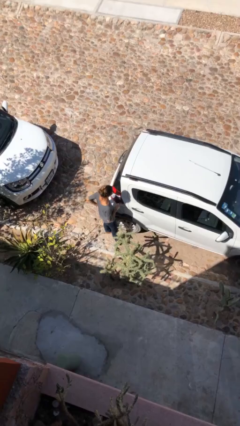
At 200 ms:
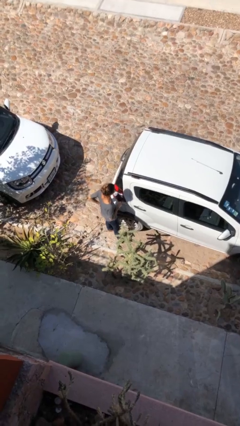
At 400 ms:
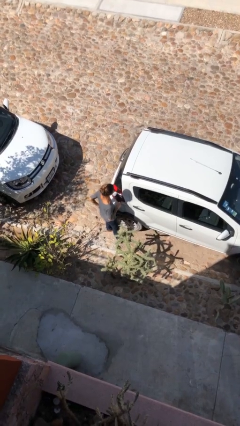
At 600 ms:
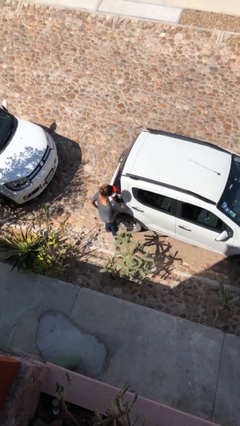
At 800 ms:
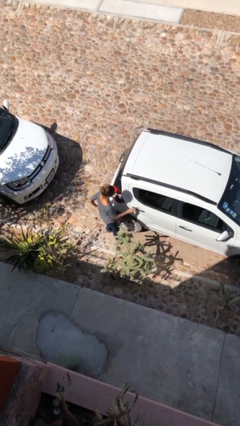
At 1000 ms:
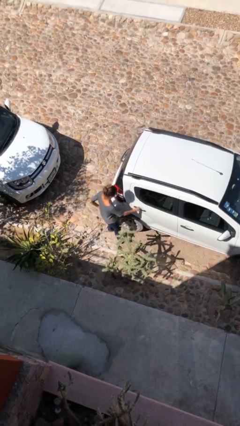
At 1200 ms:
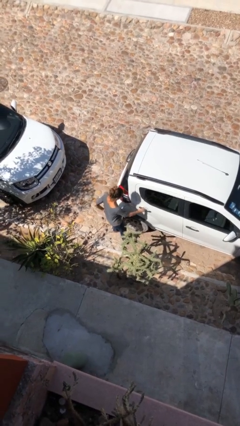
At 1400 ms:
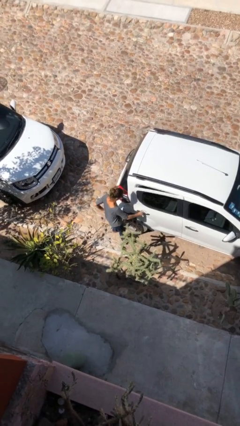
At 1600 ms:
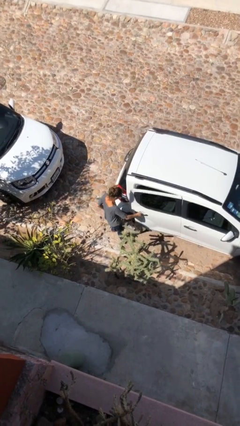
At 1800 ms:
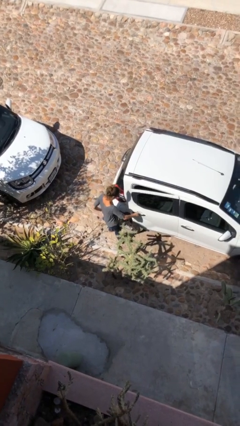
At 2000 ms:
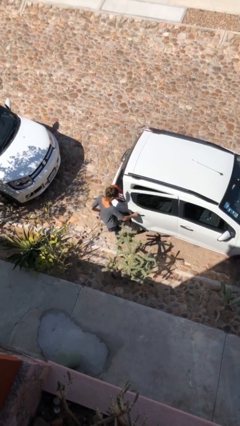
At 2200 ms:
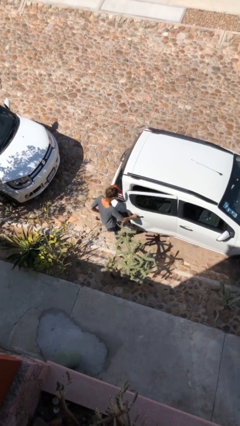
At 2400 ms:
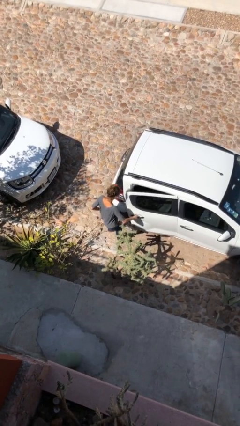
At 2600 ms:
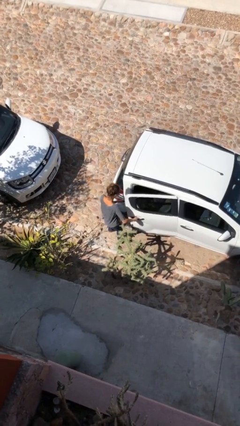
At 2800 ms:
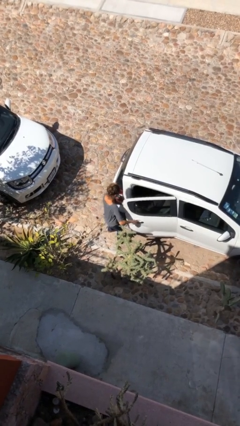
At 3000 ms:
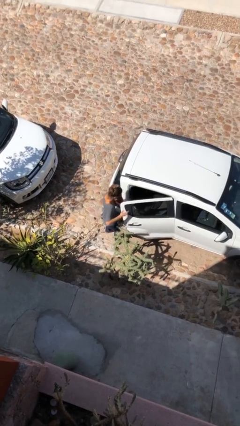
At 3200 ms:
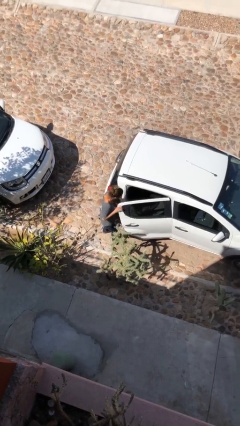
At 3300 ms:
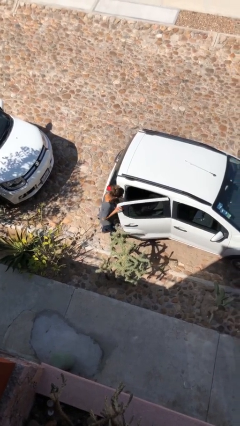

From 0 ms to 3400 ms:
person opens car door

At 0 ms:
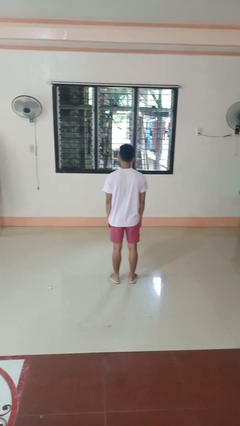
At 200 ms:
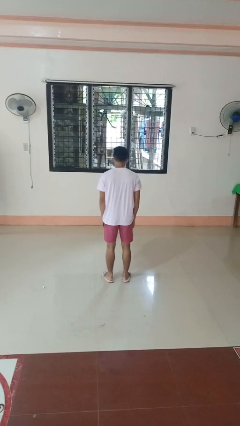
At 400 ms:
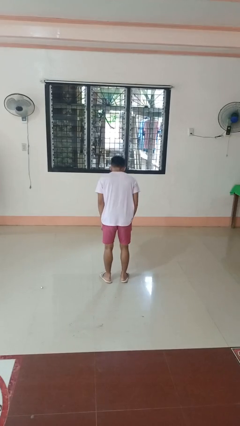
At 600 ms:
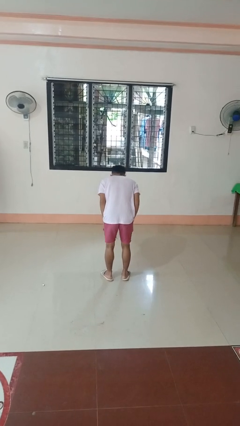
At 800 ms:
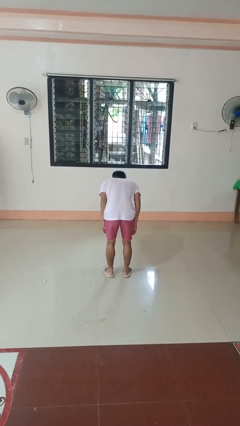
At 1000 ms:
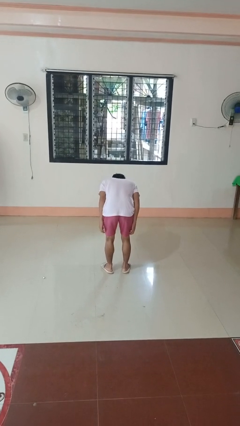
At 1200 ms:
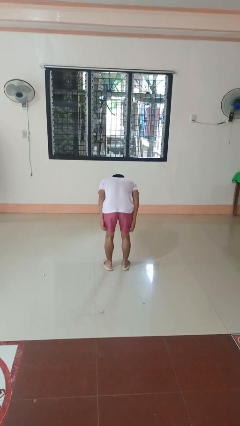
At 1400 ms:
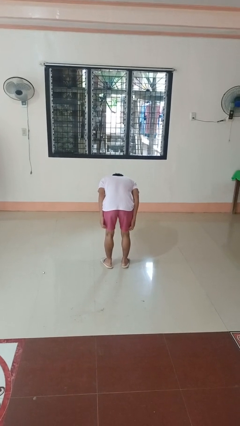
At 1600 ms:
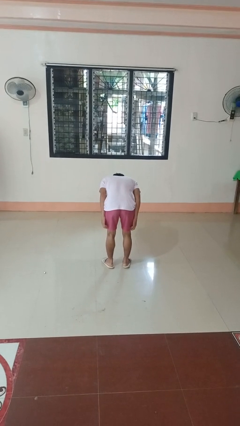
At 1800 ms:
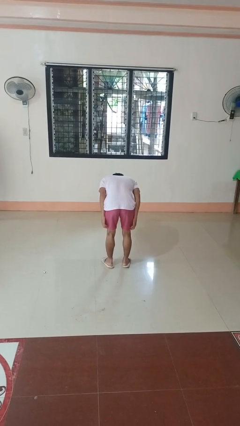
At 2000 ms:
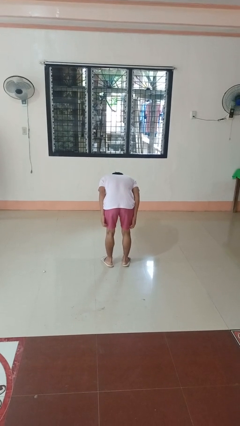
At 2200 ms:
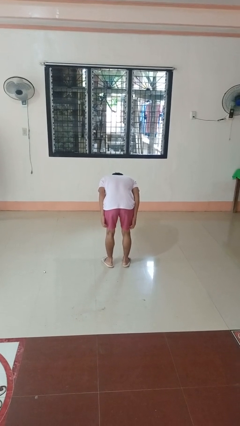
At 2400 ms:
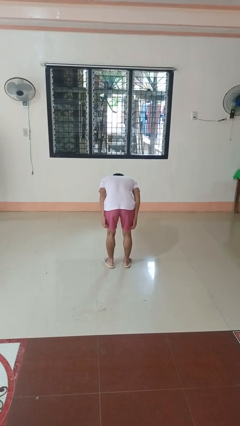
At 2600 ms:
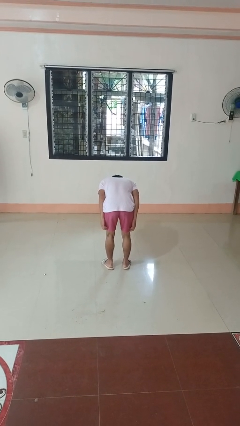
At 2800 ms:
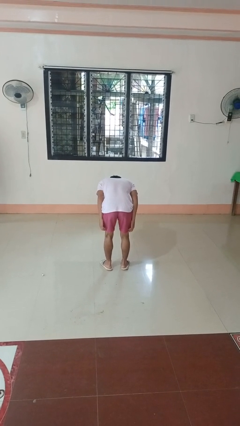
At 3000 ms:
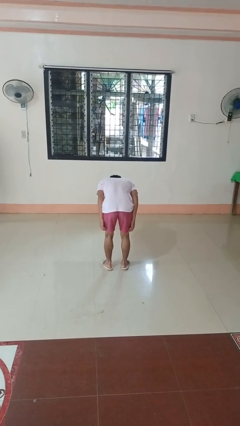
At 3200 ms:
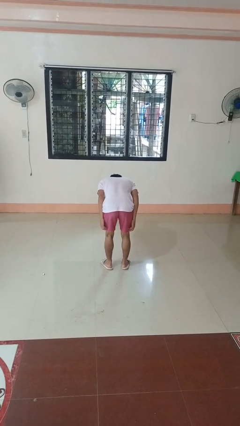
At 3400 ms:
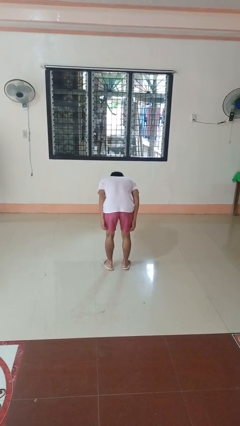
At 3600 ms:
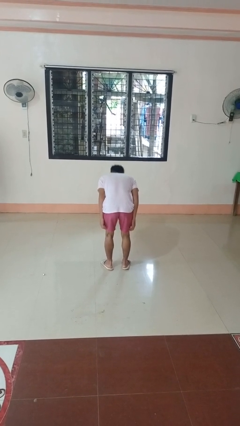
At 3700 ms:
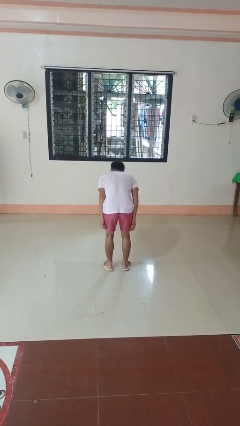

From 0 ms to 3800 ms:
person bows

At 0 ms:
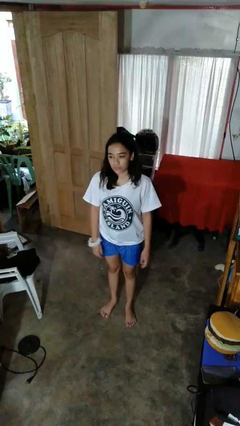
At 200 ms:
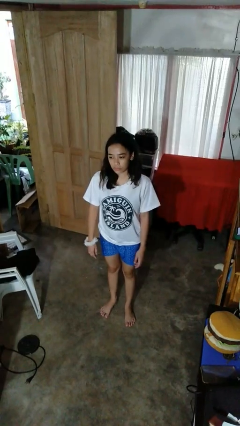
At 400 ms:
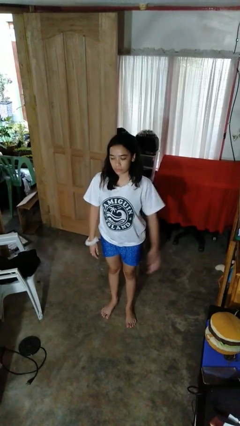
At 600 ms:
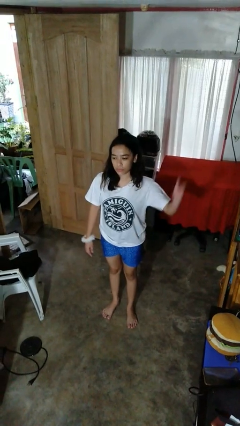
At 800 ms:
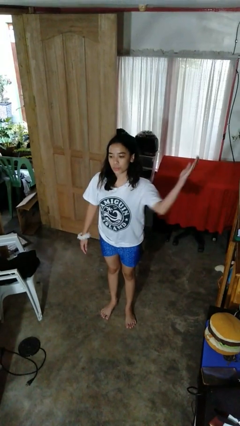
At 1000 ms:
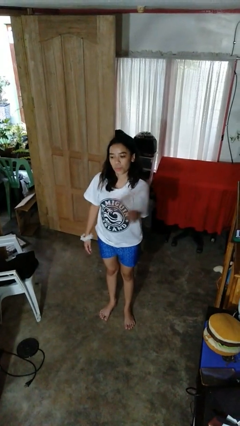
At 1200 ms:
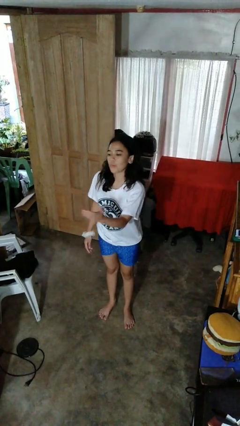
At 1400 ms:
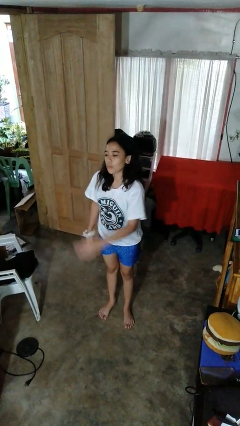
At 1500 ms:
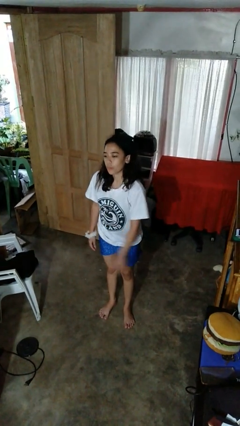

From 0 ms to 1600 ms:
person karate chop

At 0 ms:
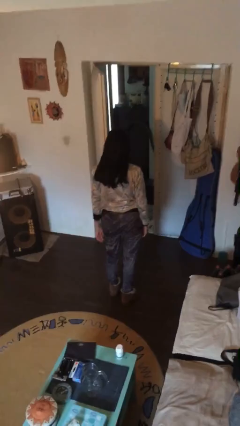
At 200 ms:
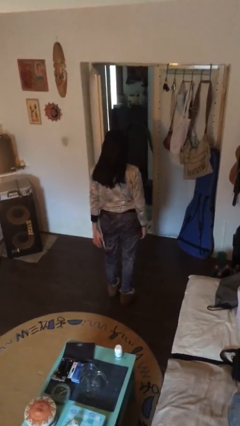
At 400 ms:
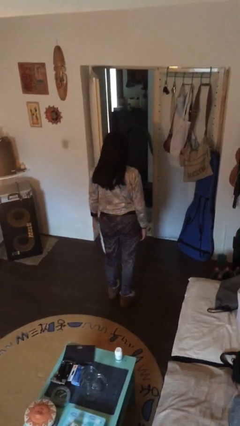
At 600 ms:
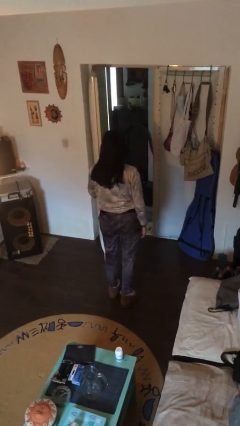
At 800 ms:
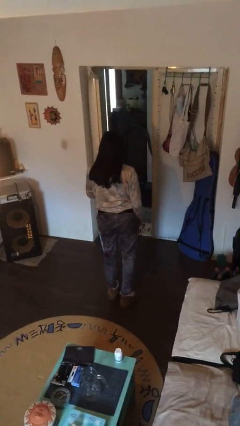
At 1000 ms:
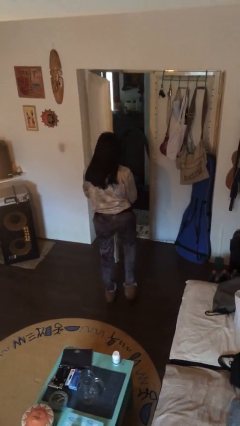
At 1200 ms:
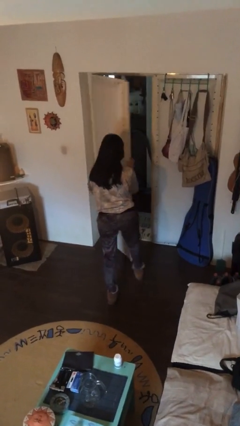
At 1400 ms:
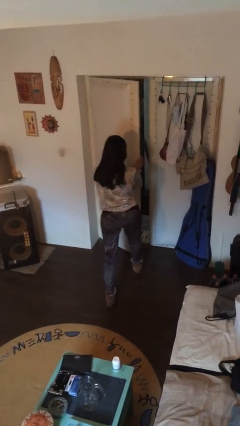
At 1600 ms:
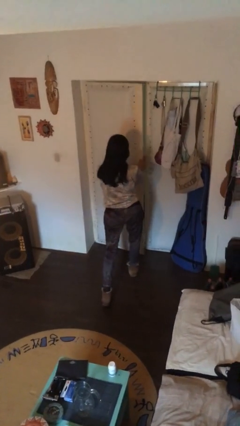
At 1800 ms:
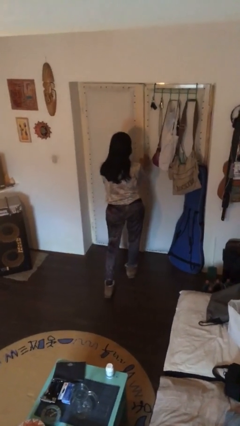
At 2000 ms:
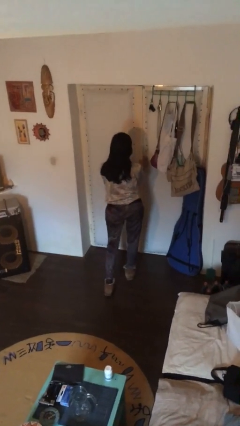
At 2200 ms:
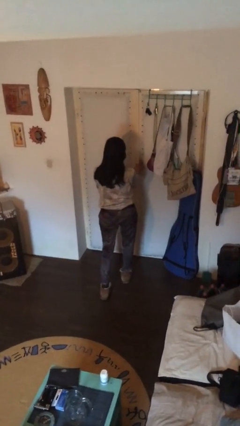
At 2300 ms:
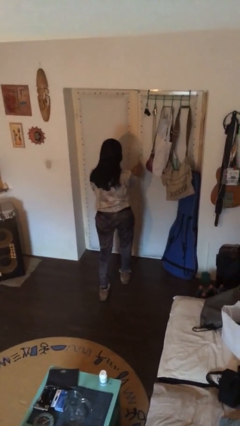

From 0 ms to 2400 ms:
person closes facility door

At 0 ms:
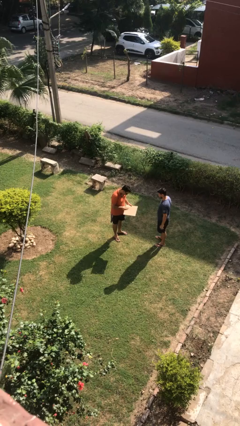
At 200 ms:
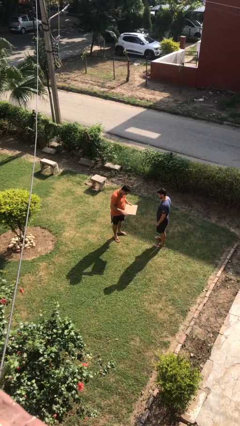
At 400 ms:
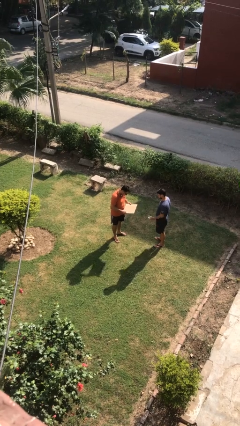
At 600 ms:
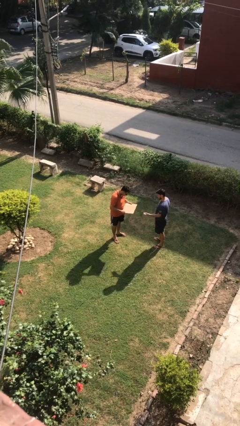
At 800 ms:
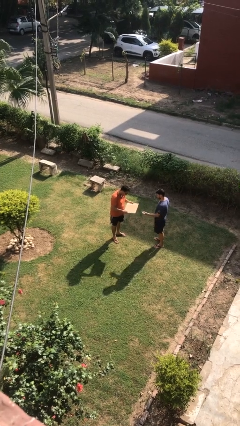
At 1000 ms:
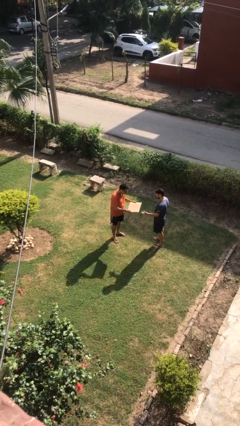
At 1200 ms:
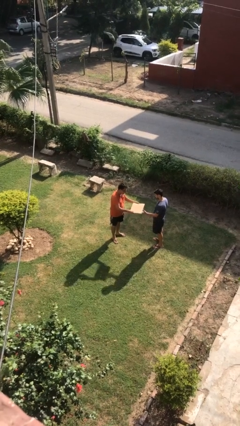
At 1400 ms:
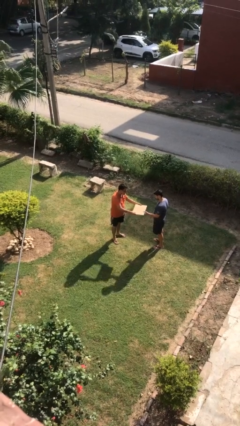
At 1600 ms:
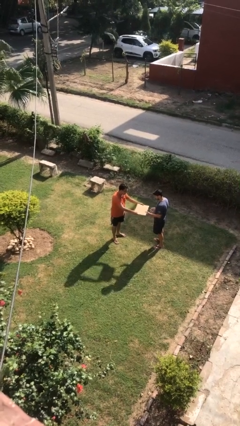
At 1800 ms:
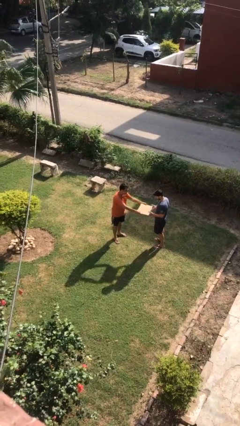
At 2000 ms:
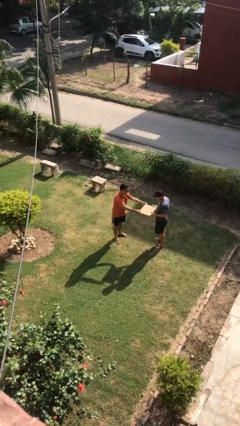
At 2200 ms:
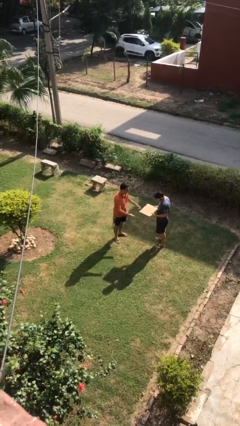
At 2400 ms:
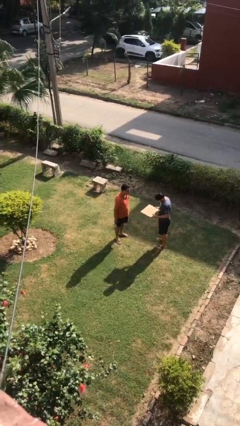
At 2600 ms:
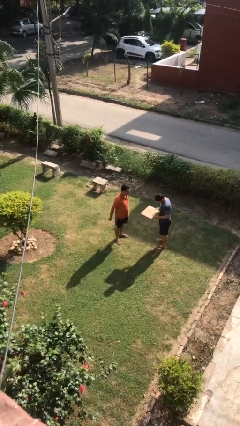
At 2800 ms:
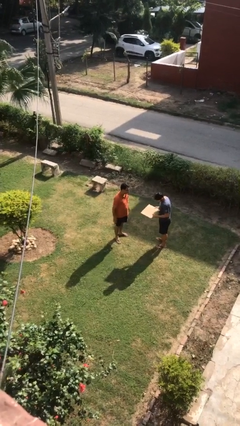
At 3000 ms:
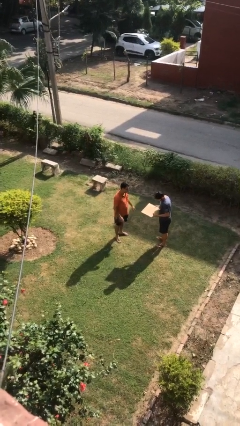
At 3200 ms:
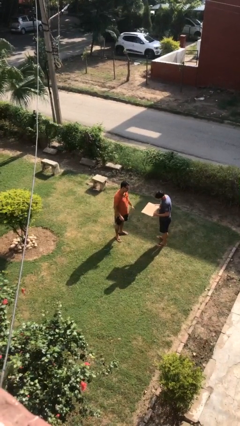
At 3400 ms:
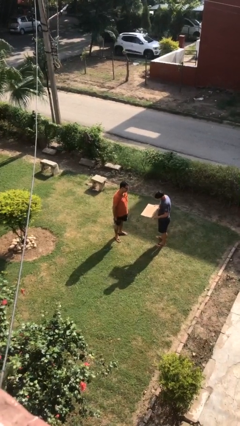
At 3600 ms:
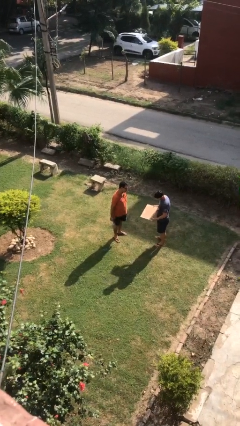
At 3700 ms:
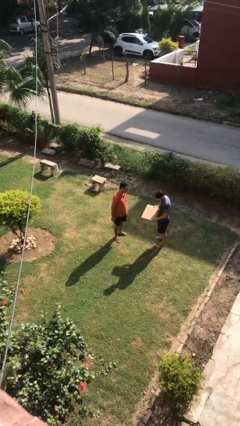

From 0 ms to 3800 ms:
person transfers object to person

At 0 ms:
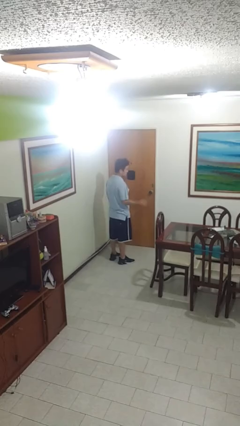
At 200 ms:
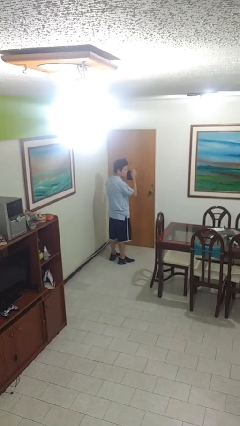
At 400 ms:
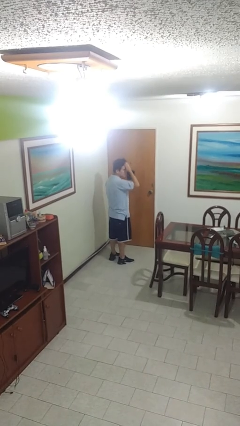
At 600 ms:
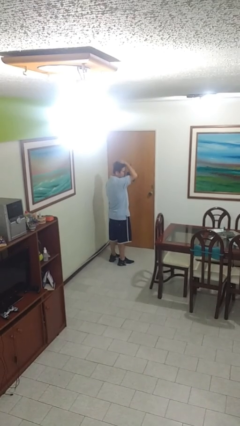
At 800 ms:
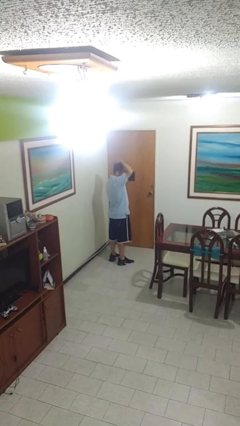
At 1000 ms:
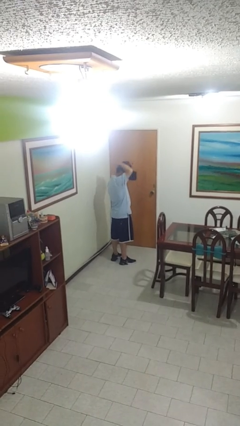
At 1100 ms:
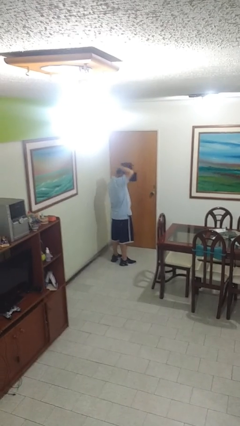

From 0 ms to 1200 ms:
person strokes hair

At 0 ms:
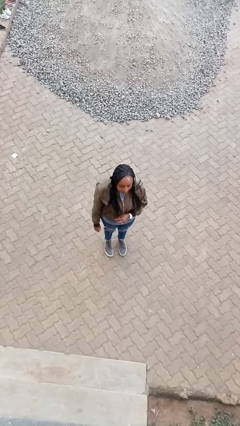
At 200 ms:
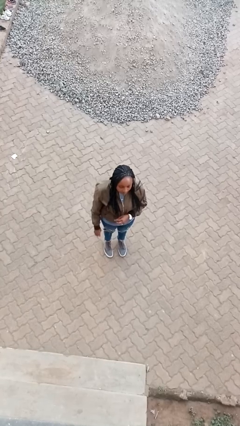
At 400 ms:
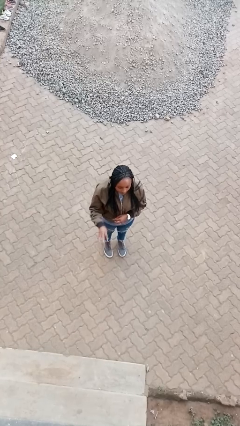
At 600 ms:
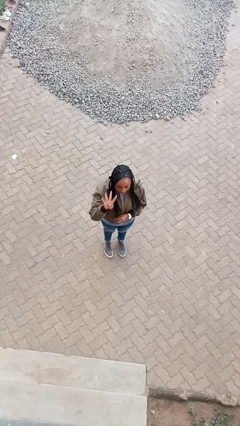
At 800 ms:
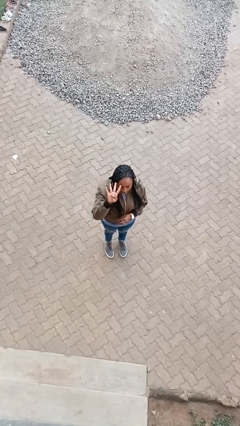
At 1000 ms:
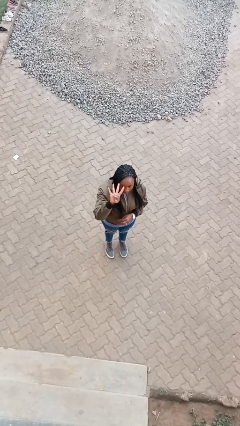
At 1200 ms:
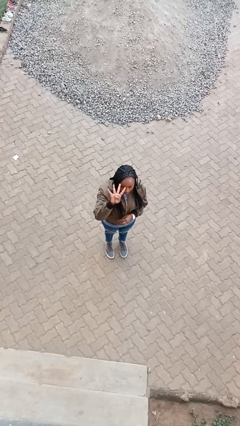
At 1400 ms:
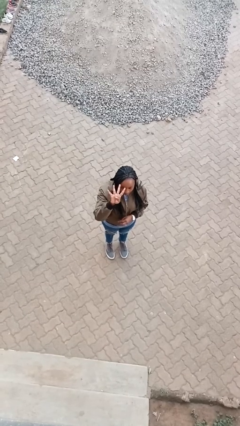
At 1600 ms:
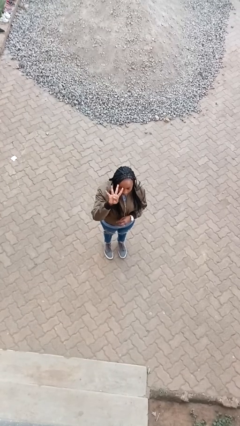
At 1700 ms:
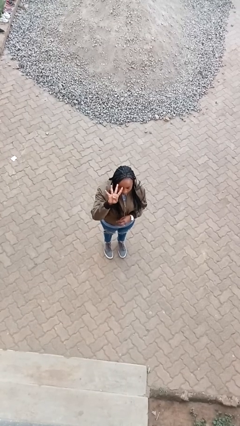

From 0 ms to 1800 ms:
person gestures number four
